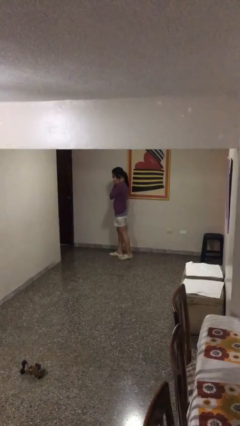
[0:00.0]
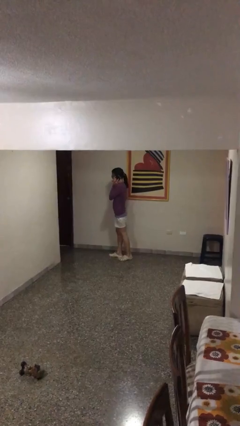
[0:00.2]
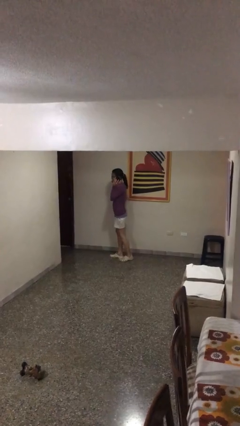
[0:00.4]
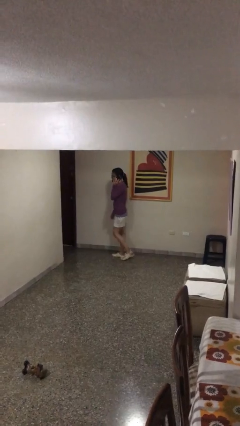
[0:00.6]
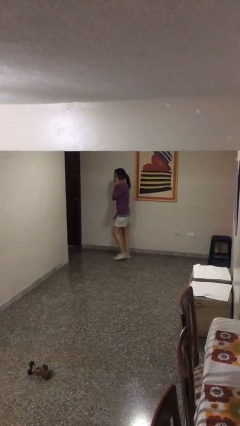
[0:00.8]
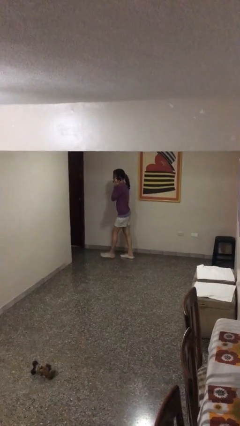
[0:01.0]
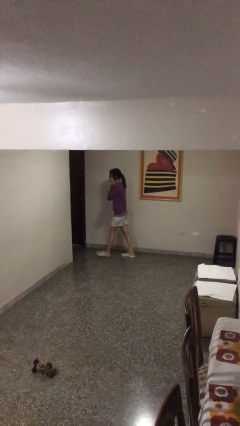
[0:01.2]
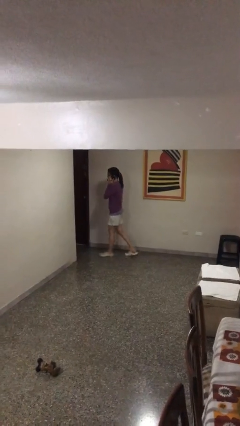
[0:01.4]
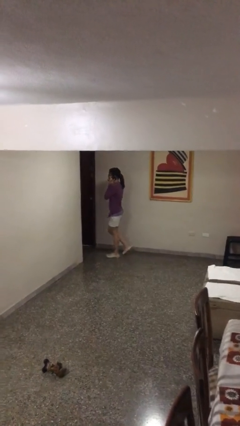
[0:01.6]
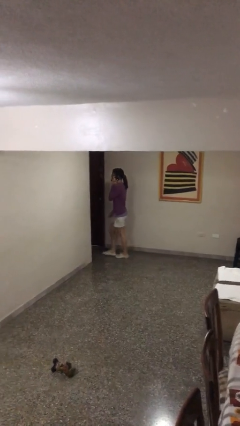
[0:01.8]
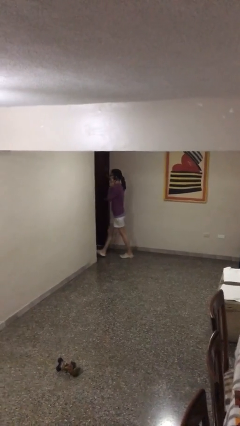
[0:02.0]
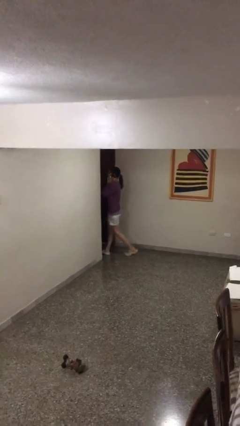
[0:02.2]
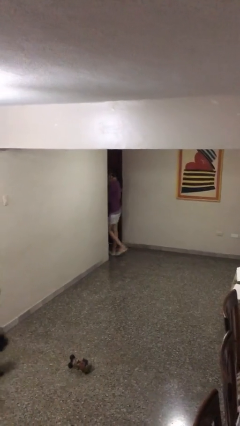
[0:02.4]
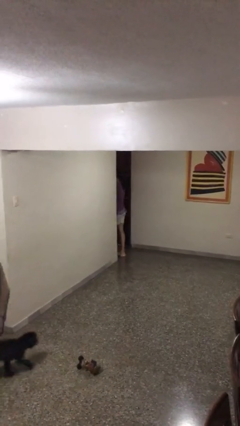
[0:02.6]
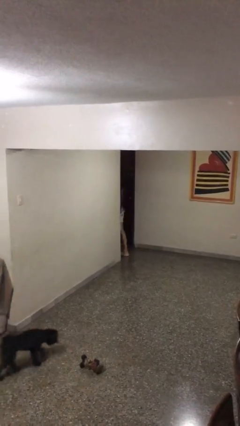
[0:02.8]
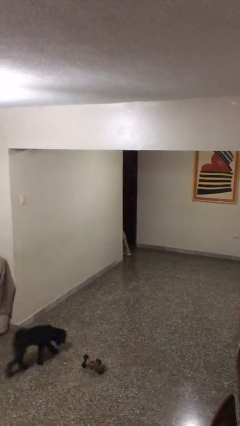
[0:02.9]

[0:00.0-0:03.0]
person exits scene through structure

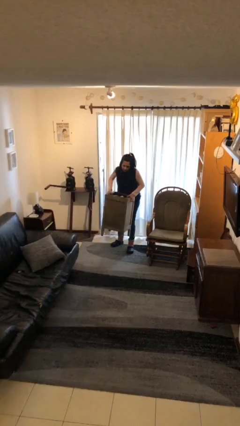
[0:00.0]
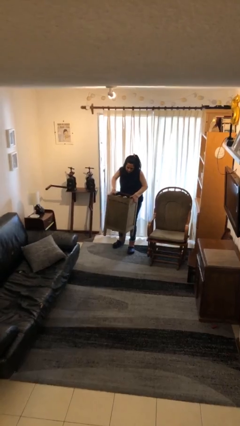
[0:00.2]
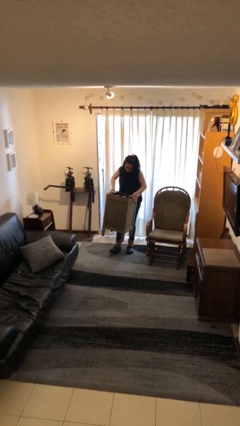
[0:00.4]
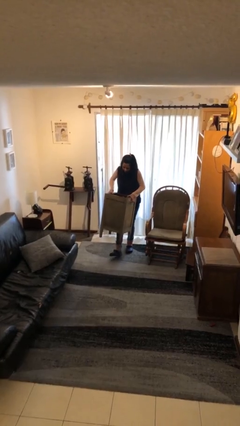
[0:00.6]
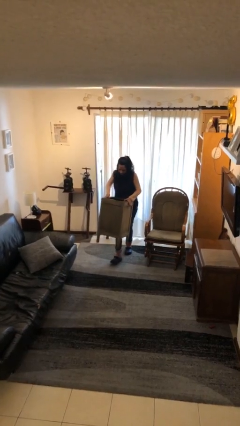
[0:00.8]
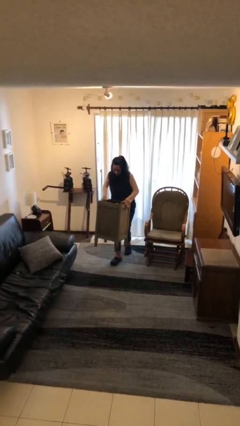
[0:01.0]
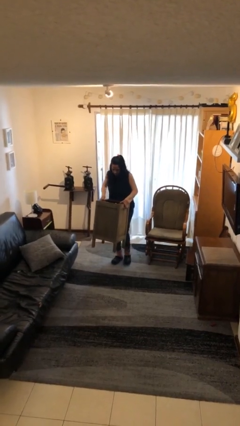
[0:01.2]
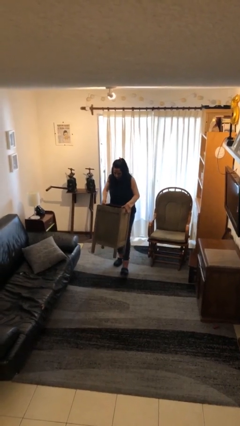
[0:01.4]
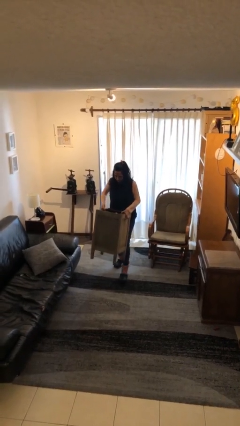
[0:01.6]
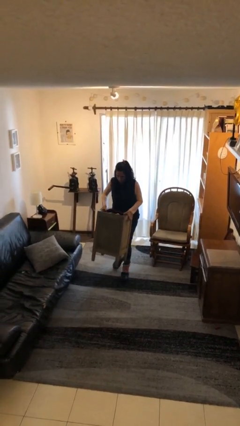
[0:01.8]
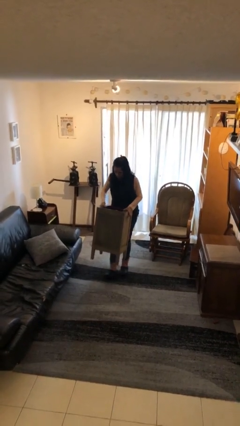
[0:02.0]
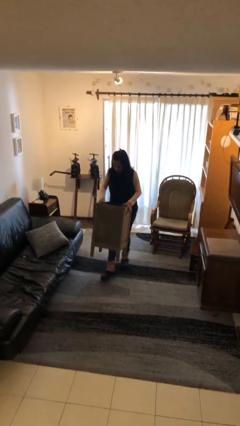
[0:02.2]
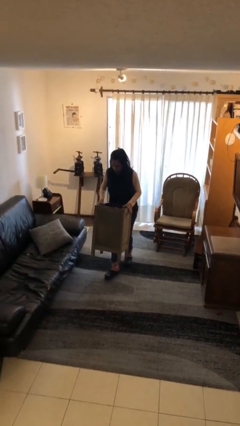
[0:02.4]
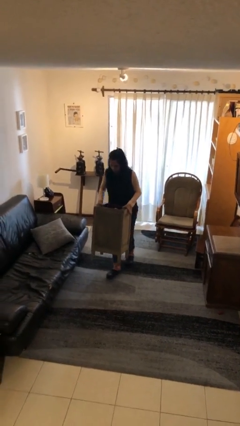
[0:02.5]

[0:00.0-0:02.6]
person carries heavy object

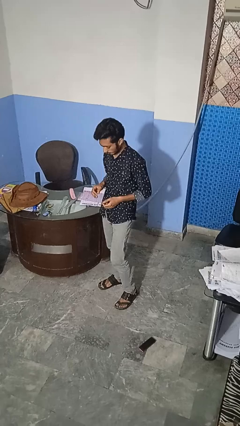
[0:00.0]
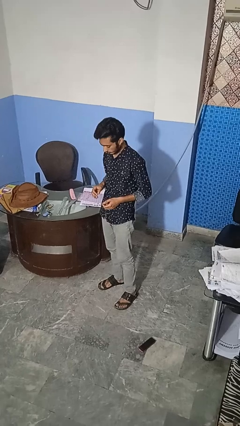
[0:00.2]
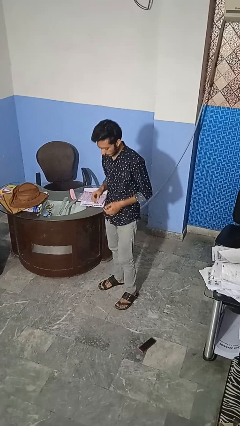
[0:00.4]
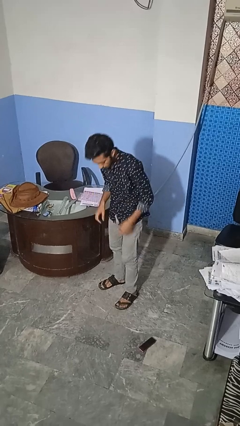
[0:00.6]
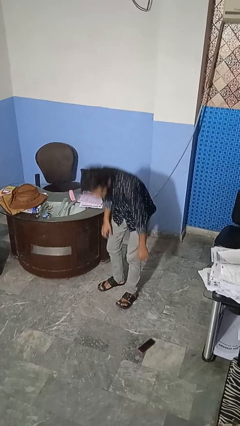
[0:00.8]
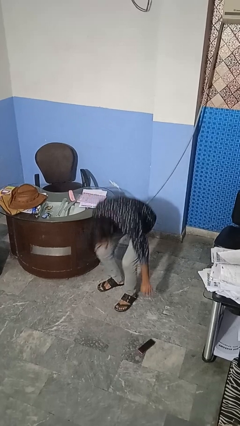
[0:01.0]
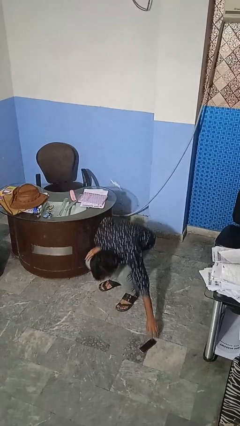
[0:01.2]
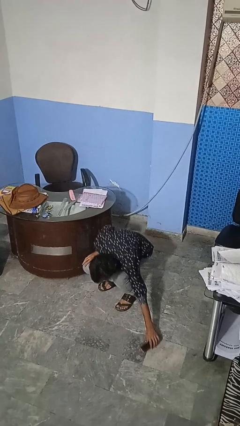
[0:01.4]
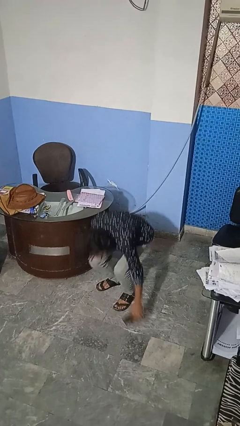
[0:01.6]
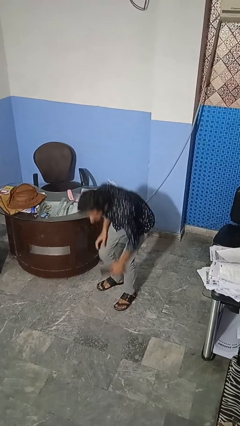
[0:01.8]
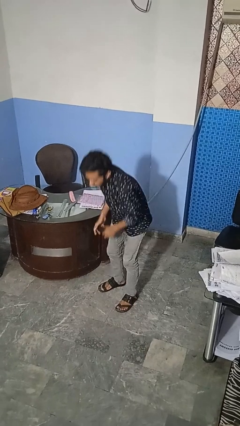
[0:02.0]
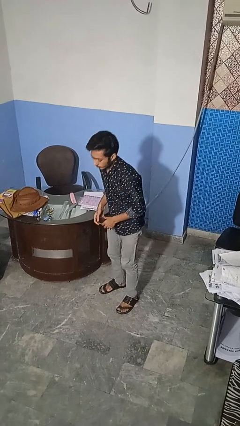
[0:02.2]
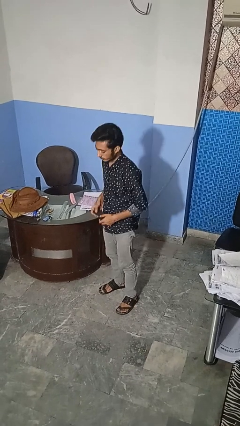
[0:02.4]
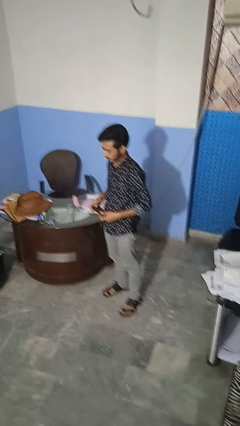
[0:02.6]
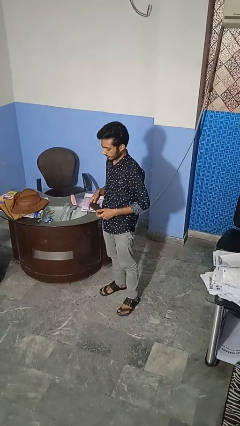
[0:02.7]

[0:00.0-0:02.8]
person picks up object from floor

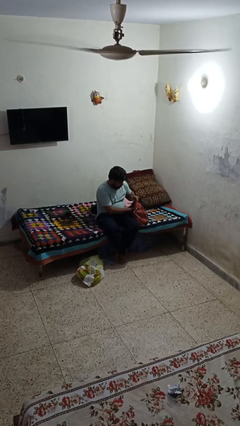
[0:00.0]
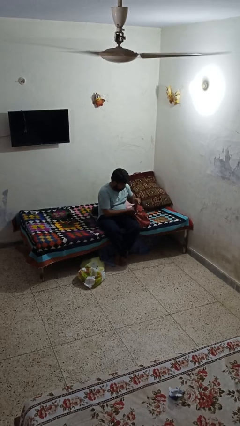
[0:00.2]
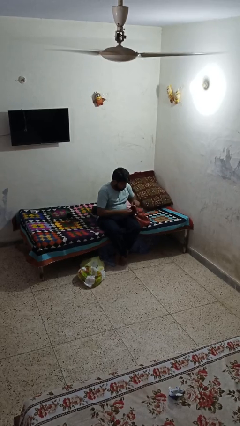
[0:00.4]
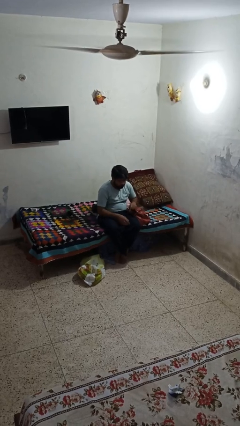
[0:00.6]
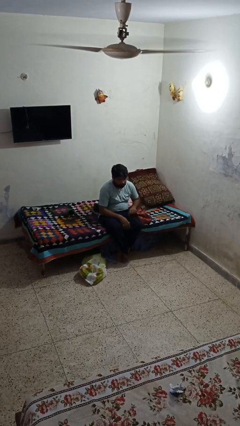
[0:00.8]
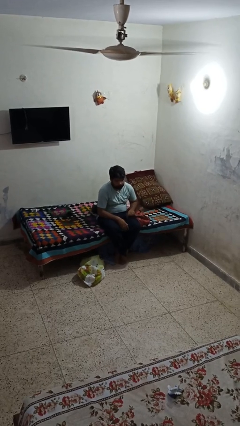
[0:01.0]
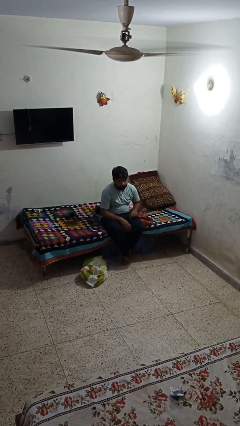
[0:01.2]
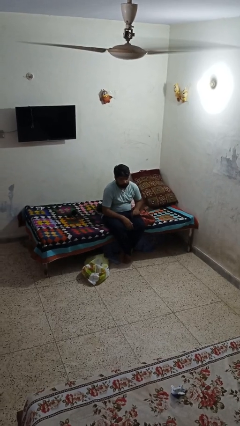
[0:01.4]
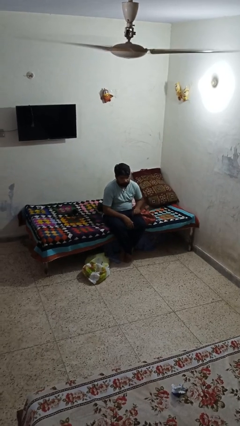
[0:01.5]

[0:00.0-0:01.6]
person puts object into purse

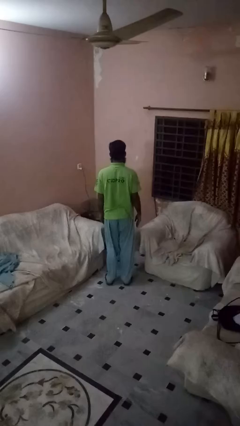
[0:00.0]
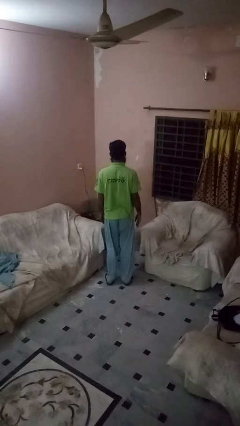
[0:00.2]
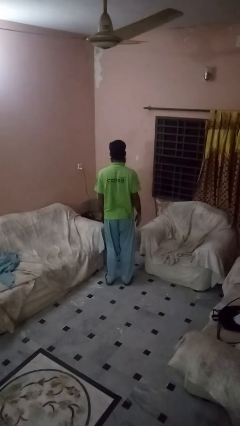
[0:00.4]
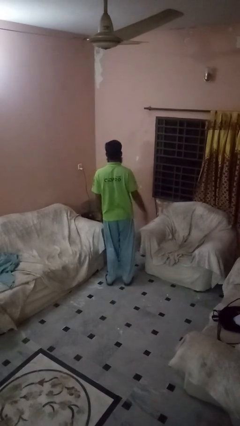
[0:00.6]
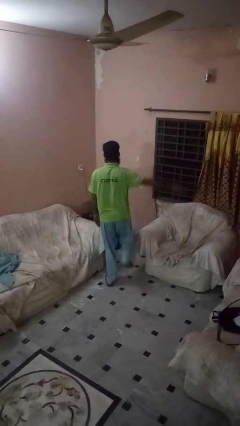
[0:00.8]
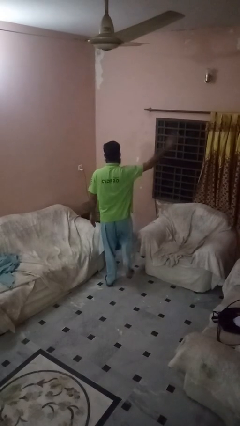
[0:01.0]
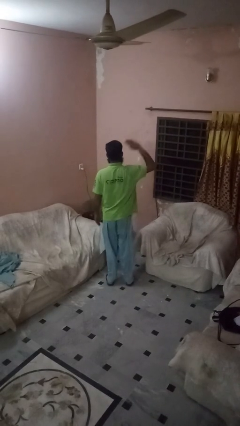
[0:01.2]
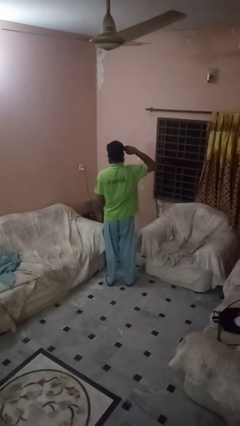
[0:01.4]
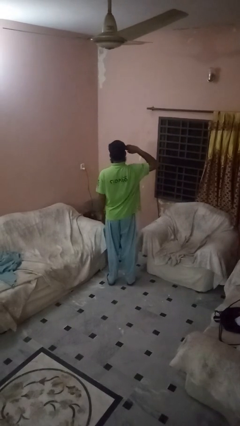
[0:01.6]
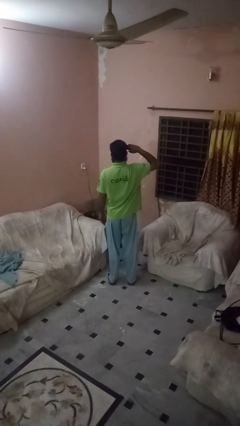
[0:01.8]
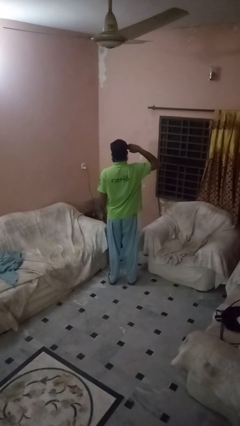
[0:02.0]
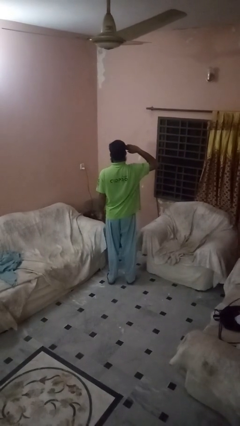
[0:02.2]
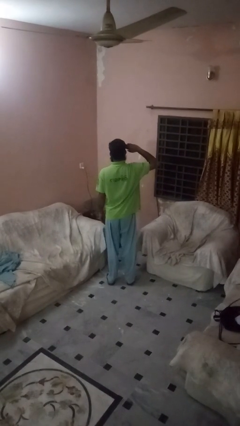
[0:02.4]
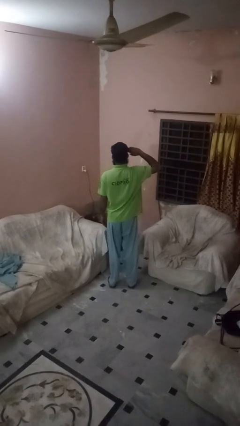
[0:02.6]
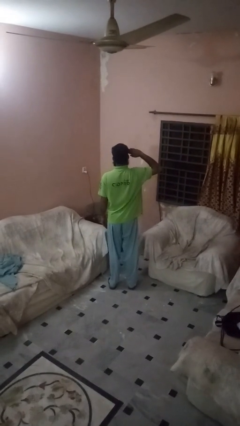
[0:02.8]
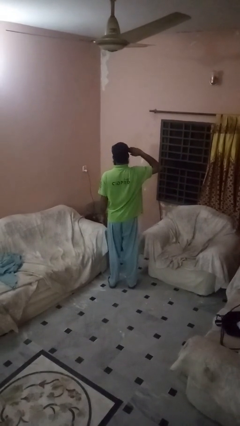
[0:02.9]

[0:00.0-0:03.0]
person salutes

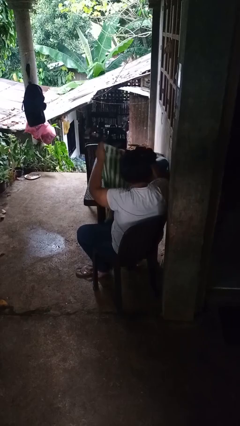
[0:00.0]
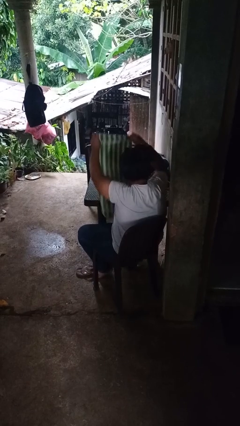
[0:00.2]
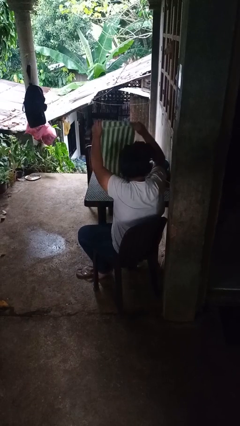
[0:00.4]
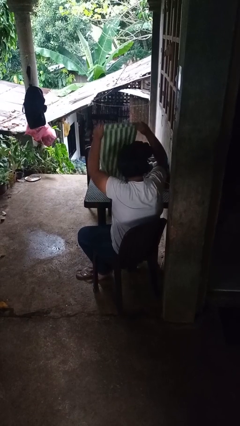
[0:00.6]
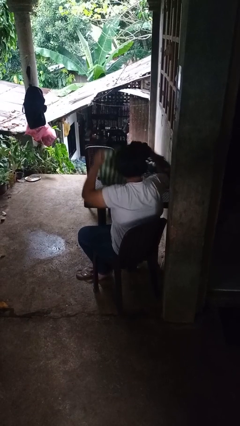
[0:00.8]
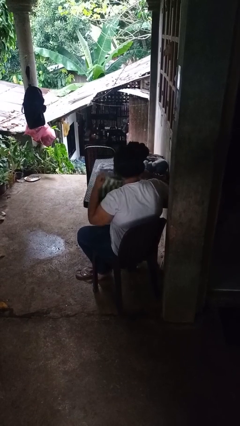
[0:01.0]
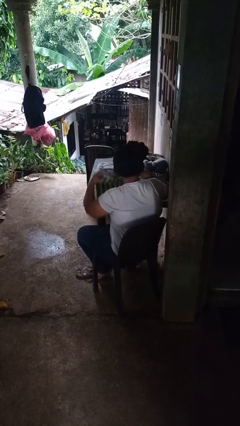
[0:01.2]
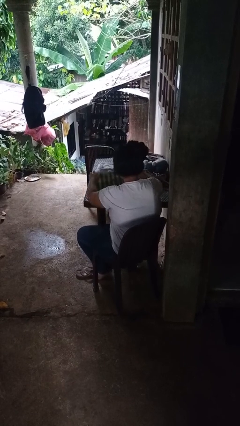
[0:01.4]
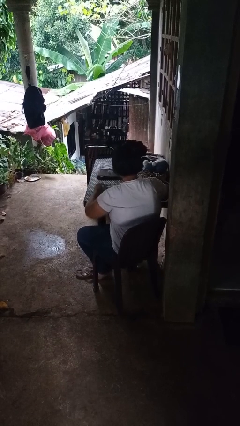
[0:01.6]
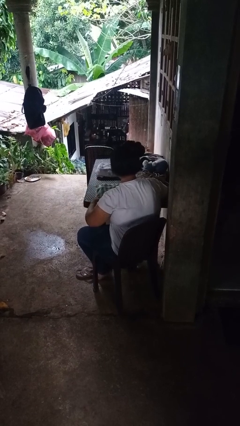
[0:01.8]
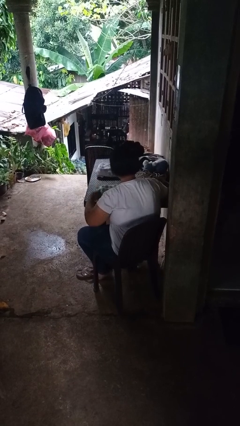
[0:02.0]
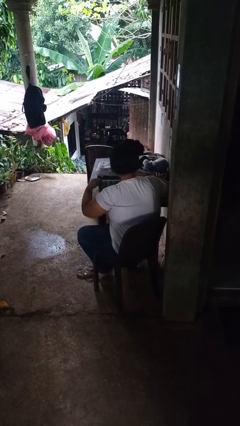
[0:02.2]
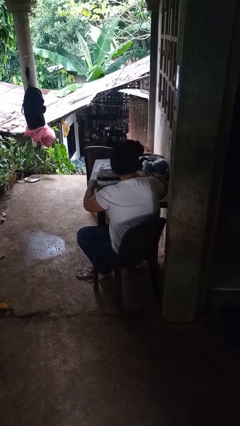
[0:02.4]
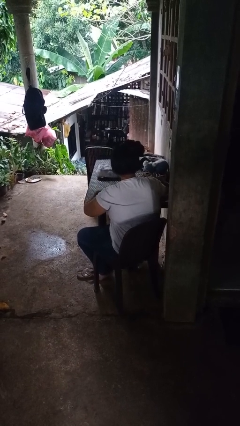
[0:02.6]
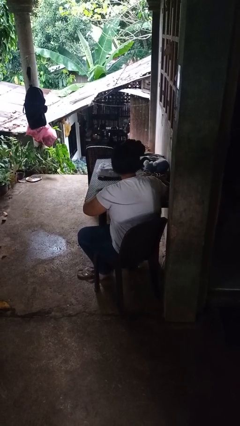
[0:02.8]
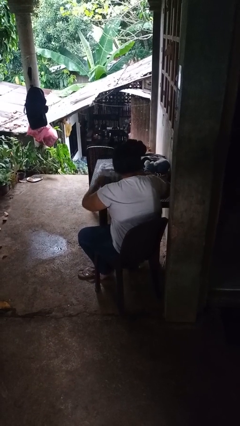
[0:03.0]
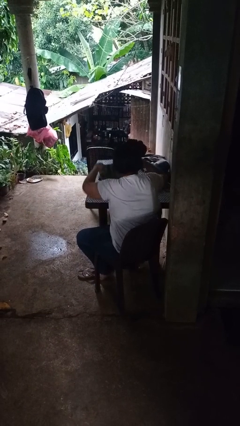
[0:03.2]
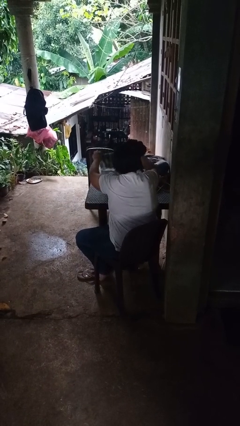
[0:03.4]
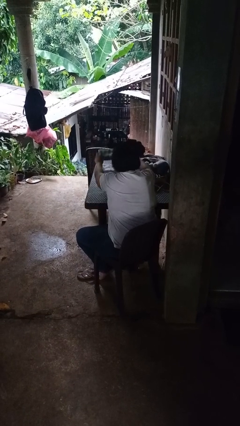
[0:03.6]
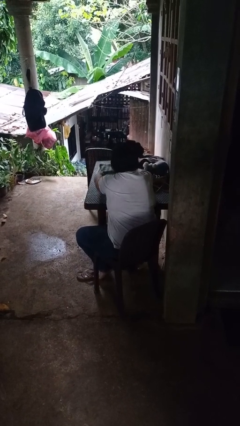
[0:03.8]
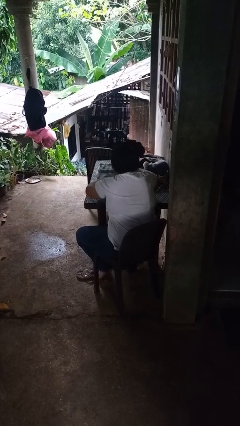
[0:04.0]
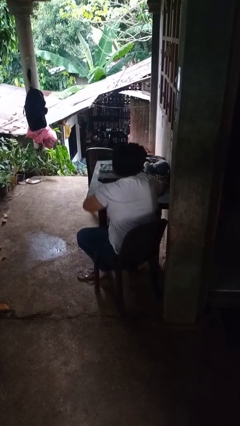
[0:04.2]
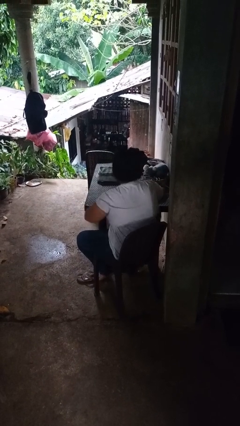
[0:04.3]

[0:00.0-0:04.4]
person folds towel

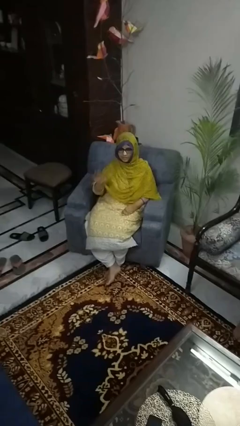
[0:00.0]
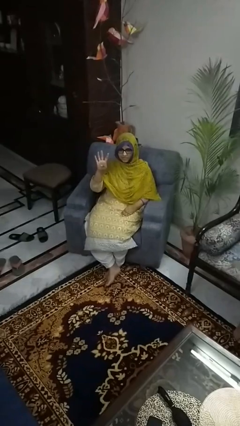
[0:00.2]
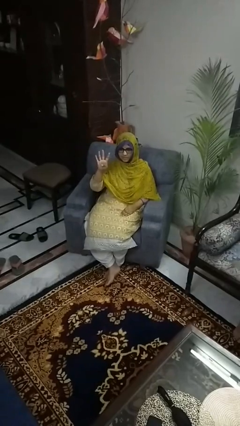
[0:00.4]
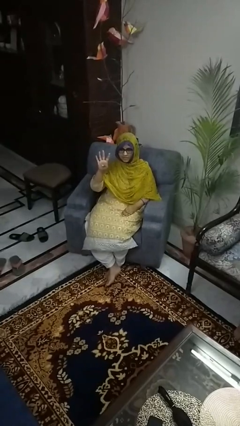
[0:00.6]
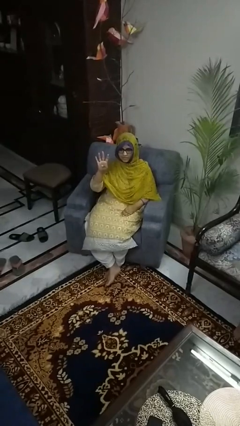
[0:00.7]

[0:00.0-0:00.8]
person gestures number four
